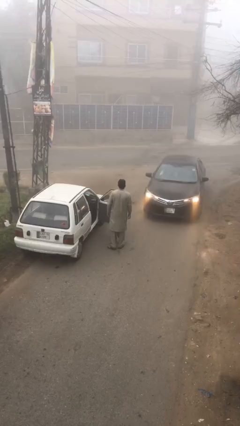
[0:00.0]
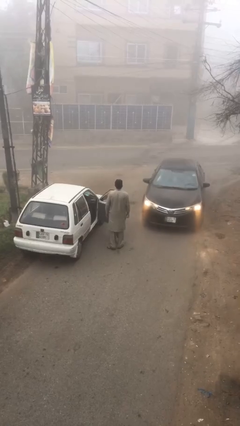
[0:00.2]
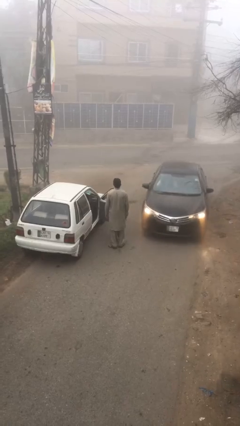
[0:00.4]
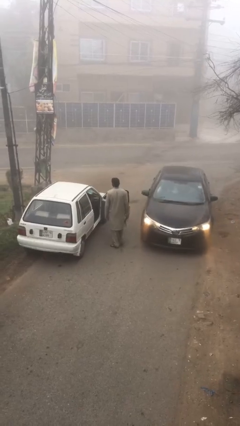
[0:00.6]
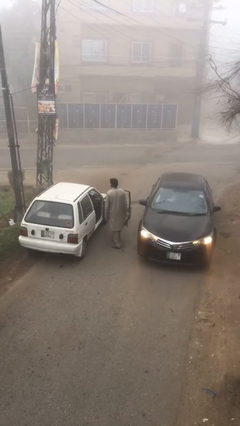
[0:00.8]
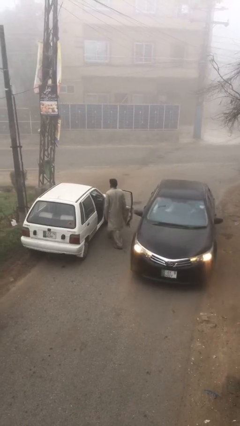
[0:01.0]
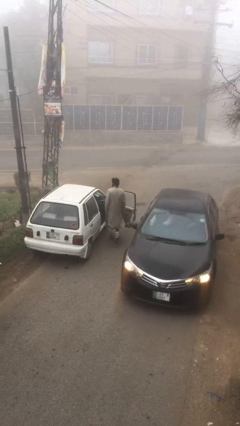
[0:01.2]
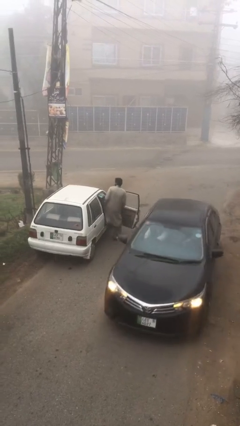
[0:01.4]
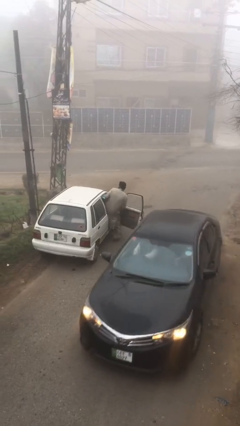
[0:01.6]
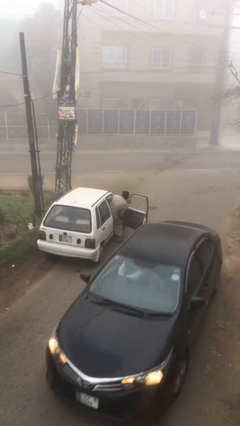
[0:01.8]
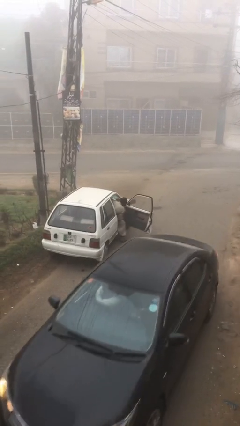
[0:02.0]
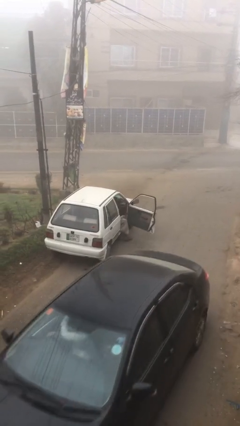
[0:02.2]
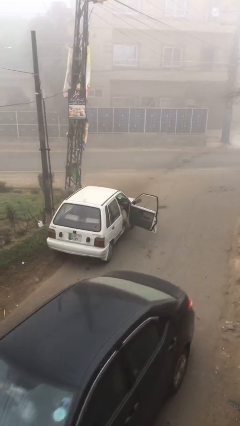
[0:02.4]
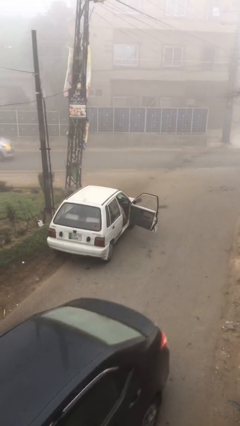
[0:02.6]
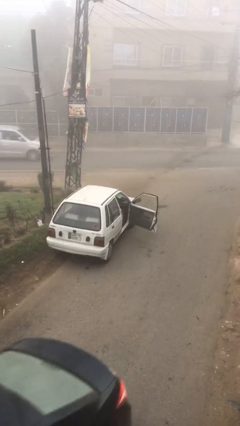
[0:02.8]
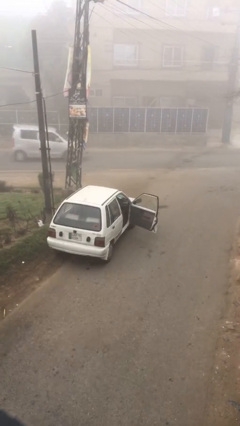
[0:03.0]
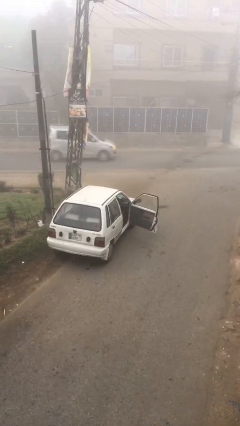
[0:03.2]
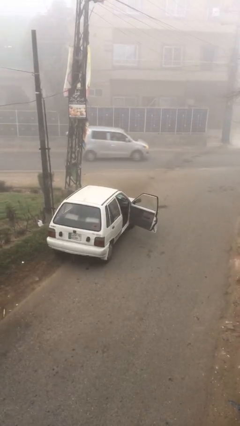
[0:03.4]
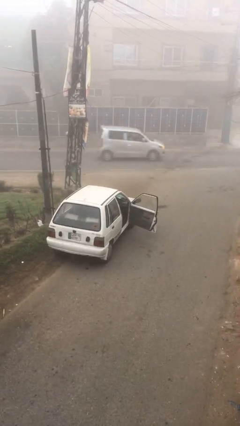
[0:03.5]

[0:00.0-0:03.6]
person enters car

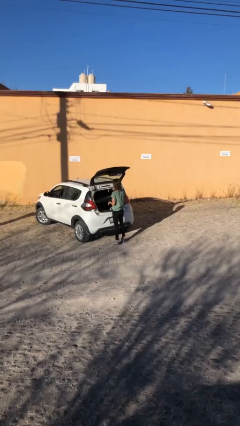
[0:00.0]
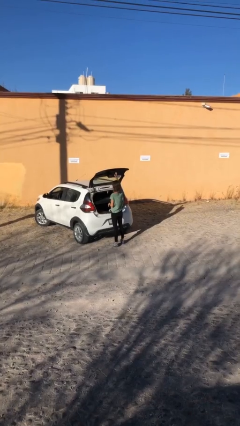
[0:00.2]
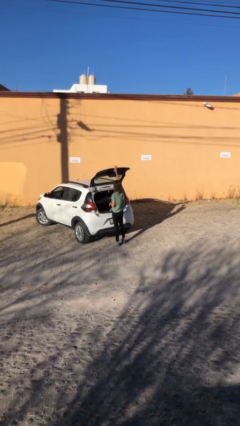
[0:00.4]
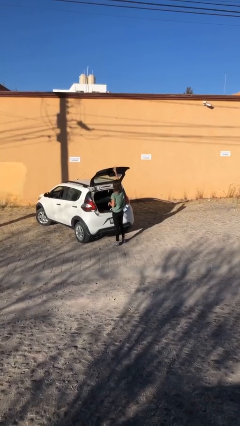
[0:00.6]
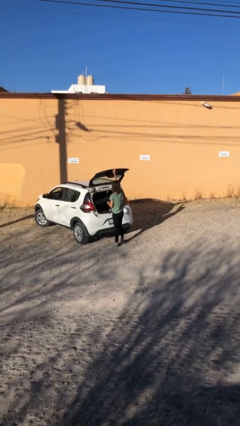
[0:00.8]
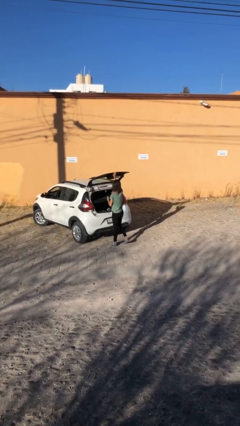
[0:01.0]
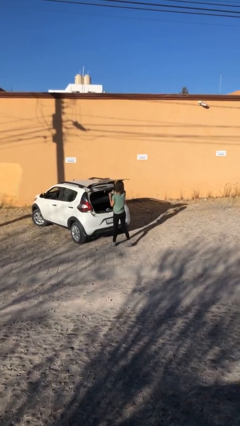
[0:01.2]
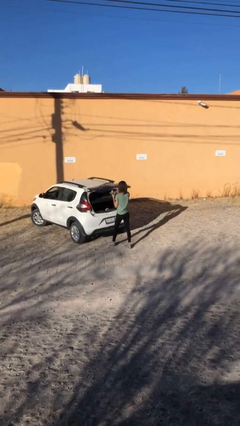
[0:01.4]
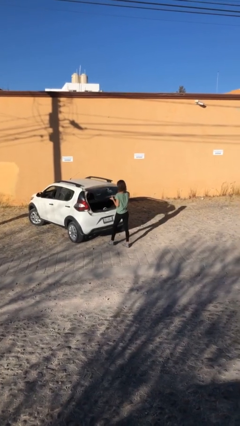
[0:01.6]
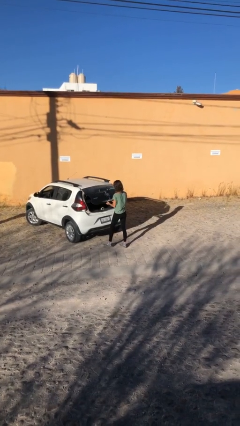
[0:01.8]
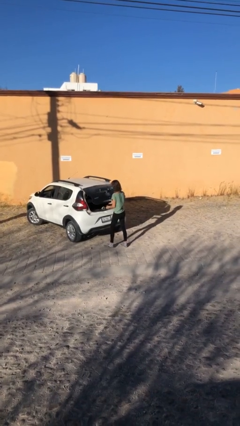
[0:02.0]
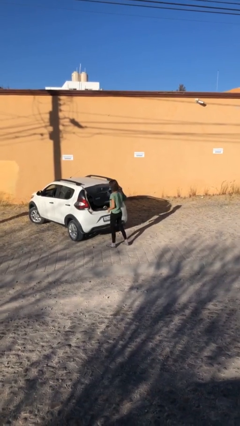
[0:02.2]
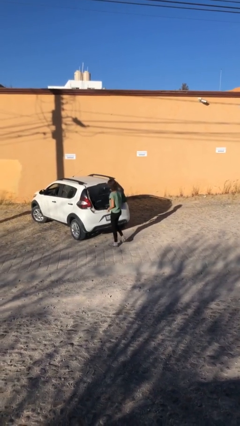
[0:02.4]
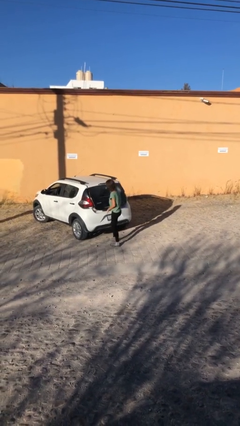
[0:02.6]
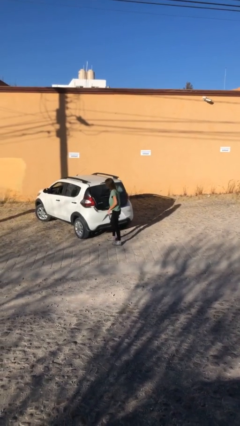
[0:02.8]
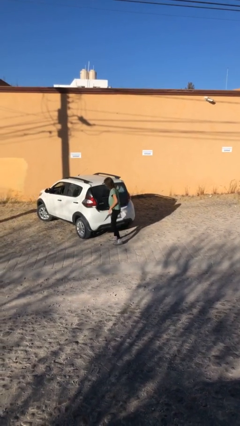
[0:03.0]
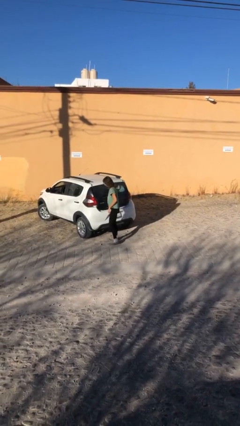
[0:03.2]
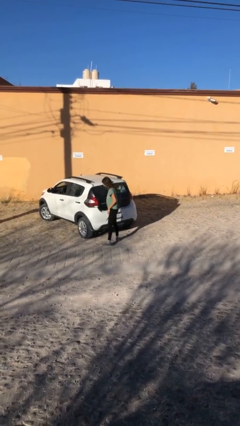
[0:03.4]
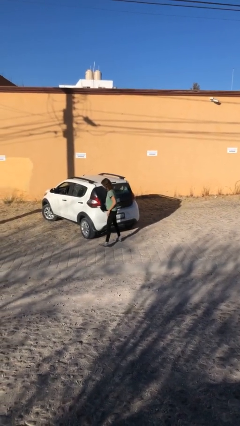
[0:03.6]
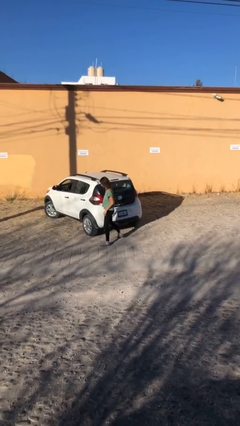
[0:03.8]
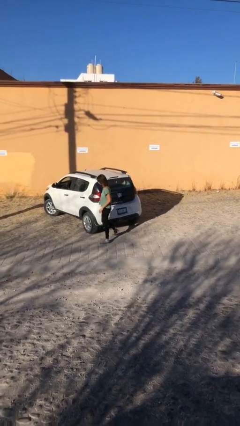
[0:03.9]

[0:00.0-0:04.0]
person closes car trunk

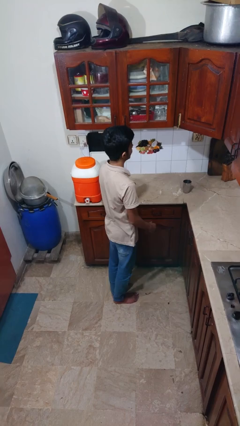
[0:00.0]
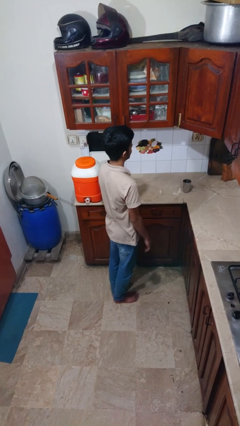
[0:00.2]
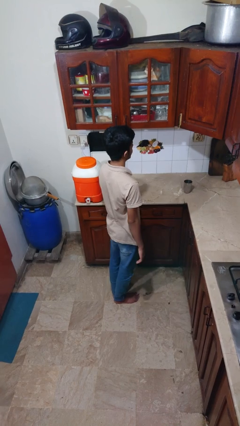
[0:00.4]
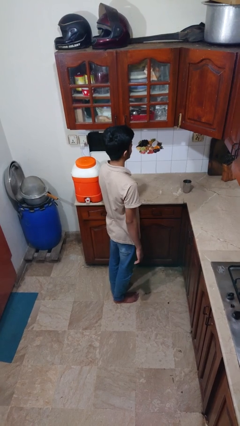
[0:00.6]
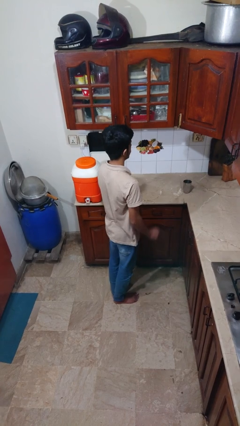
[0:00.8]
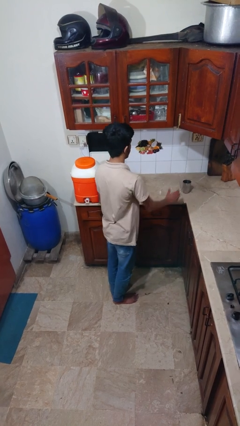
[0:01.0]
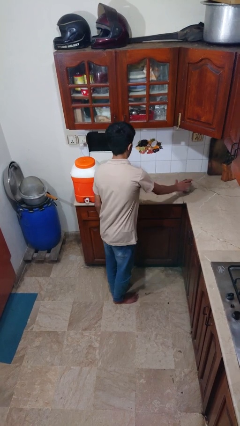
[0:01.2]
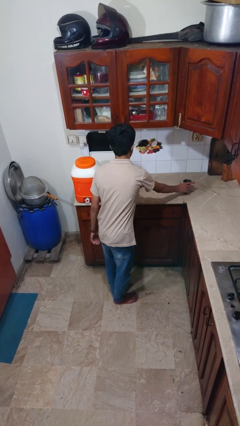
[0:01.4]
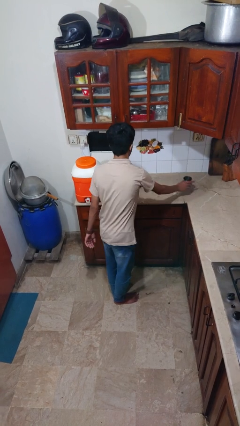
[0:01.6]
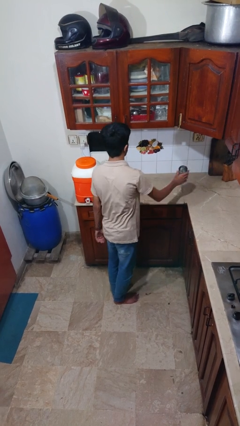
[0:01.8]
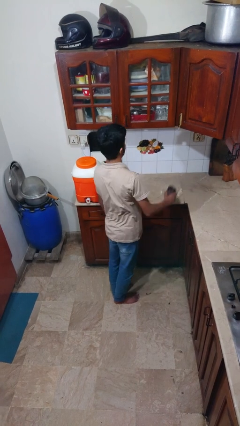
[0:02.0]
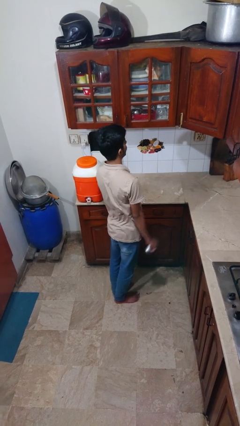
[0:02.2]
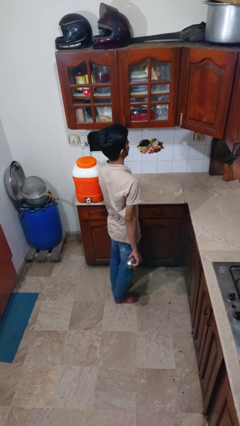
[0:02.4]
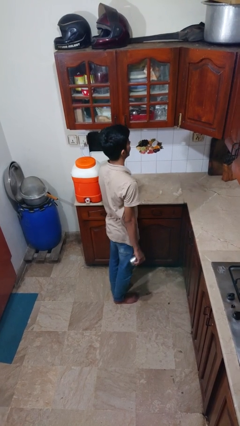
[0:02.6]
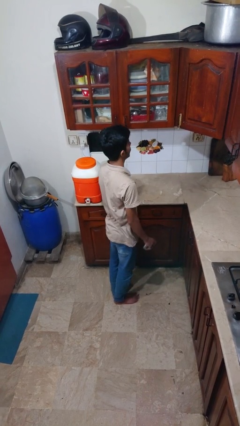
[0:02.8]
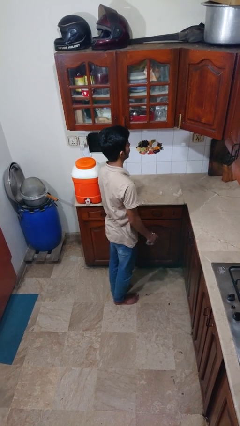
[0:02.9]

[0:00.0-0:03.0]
person picks up object from countertop

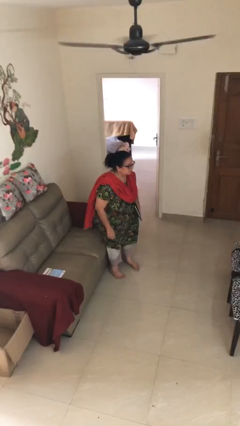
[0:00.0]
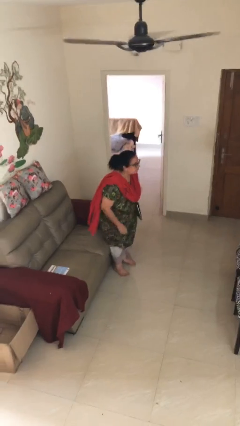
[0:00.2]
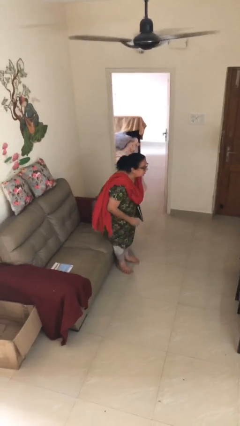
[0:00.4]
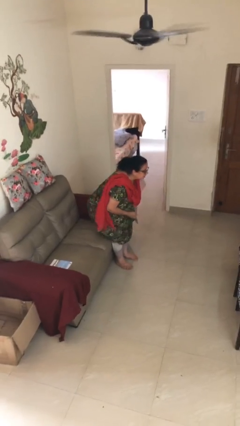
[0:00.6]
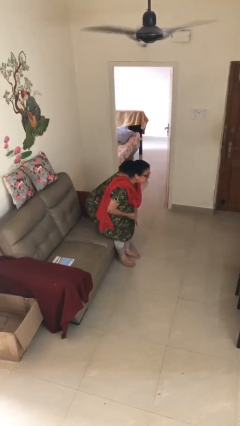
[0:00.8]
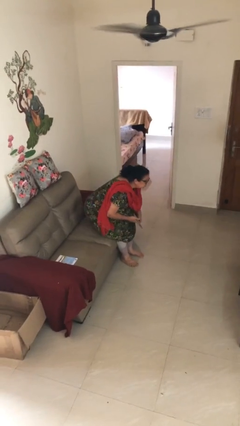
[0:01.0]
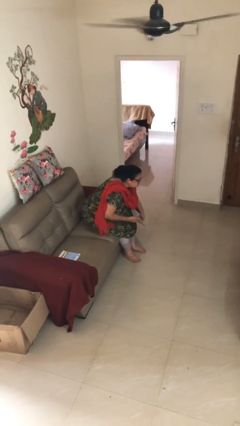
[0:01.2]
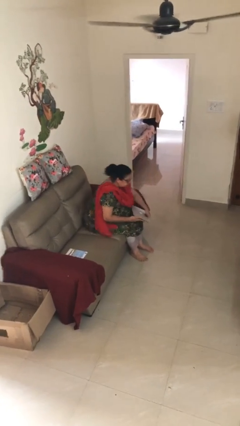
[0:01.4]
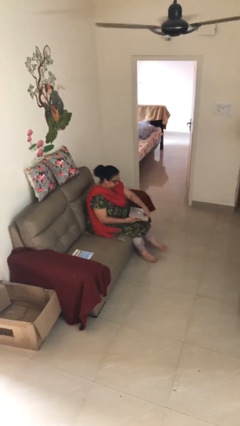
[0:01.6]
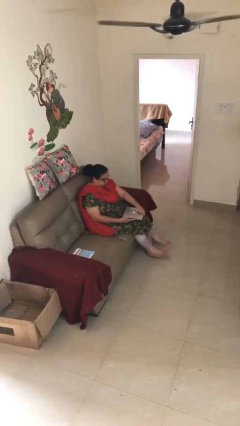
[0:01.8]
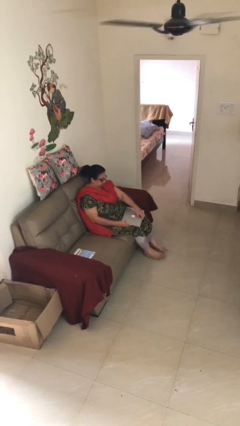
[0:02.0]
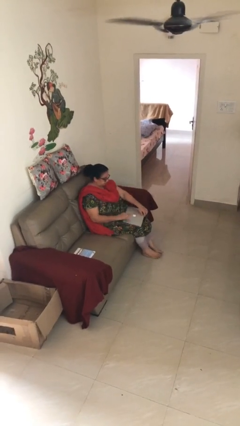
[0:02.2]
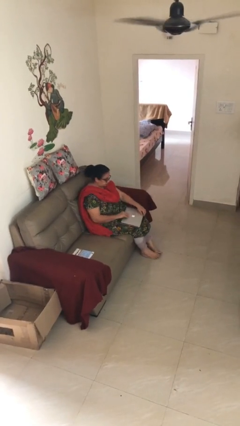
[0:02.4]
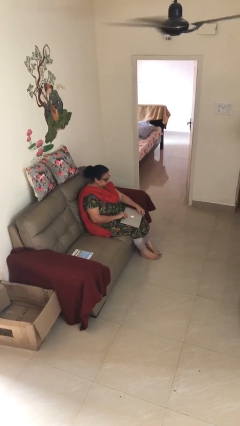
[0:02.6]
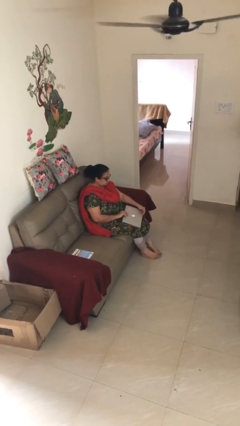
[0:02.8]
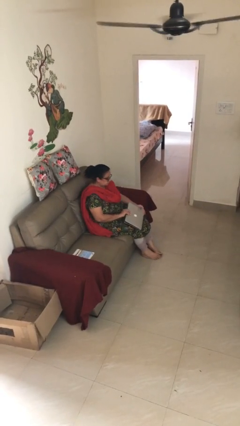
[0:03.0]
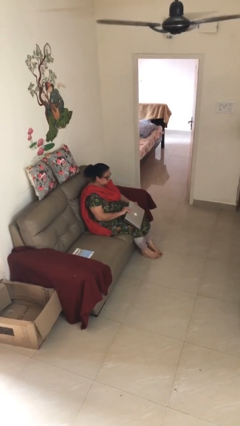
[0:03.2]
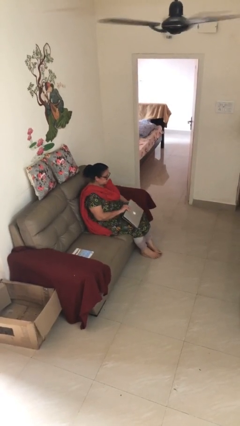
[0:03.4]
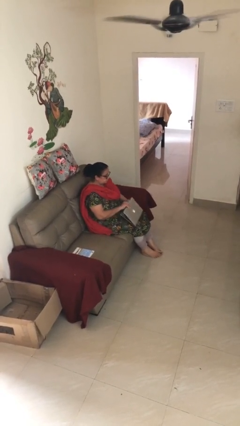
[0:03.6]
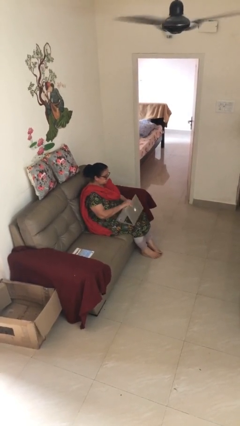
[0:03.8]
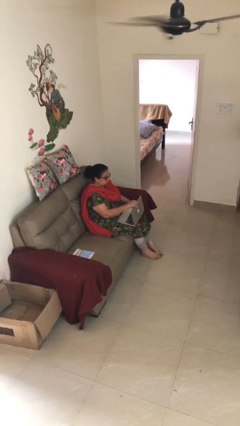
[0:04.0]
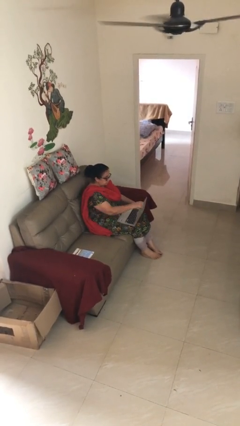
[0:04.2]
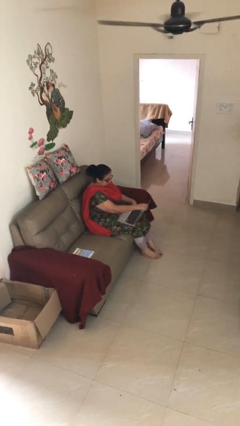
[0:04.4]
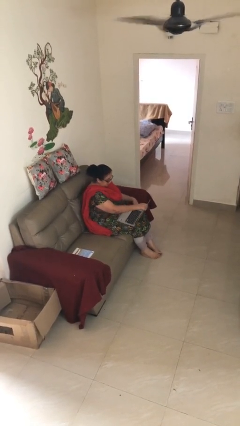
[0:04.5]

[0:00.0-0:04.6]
person sits down

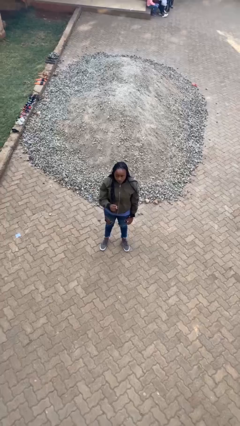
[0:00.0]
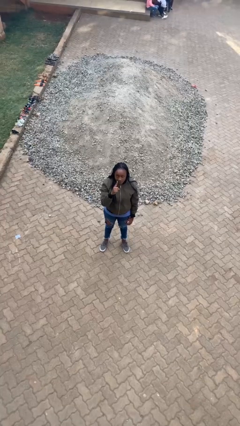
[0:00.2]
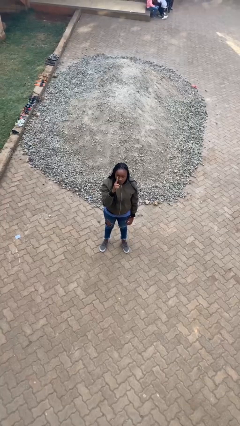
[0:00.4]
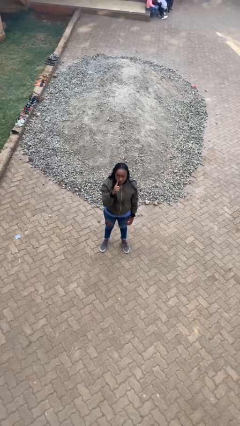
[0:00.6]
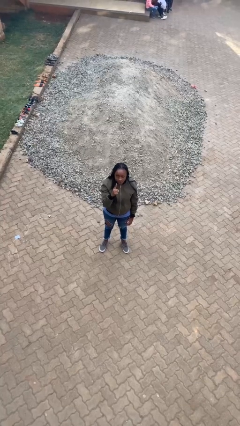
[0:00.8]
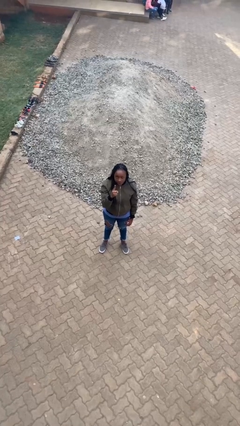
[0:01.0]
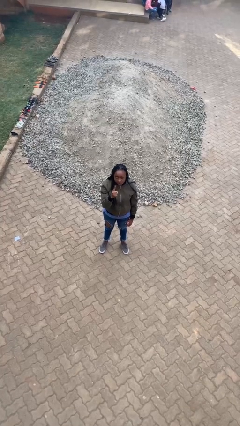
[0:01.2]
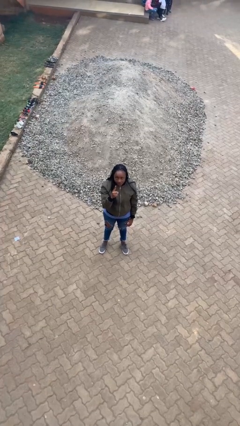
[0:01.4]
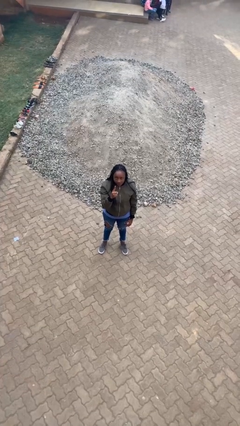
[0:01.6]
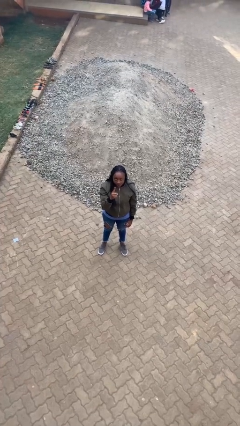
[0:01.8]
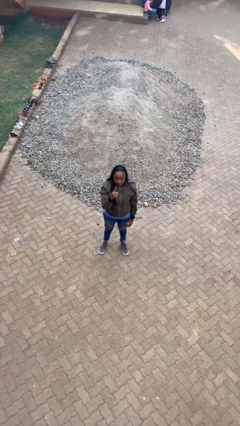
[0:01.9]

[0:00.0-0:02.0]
person gestures number one

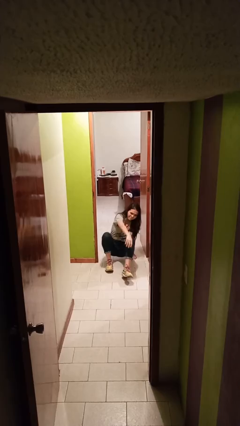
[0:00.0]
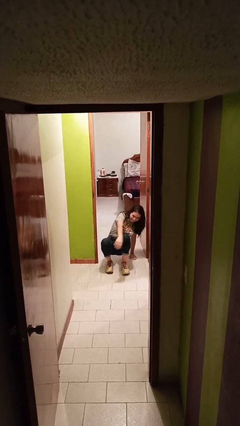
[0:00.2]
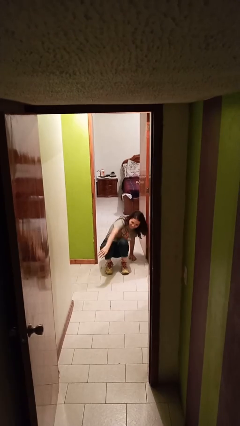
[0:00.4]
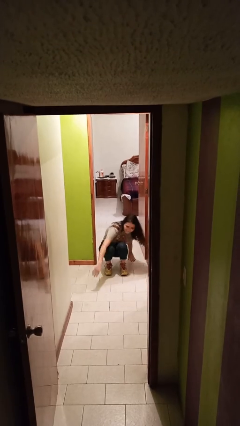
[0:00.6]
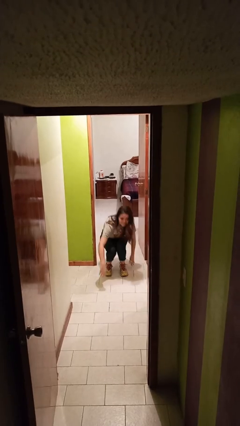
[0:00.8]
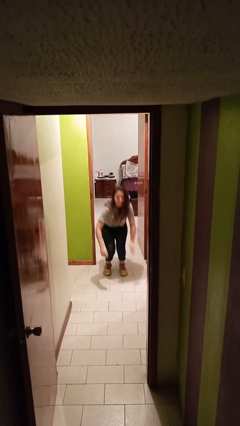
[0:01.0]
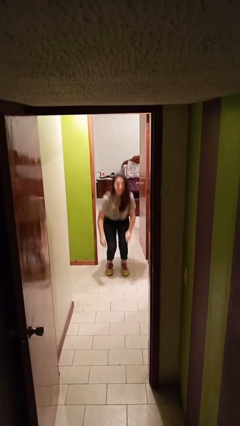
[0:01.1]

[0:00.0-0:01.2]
person stands up
